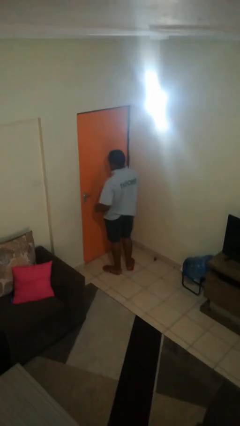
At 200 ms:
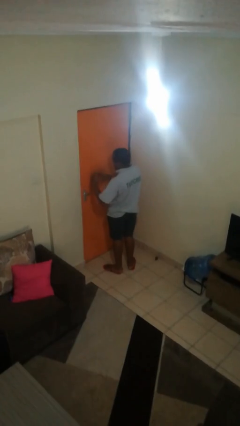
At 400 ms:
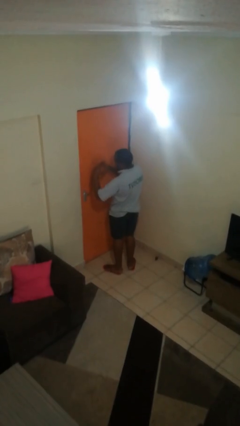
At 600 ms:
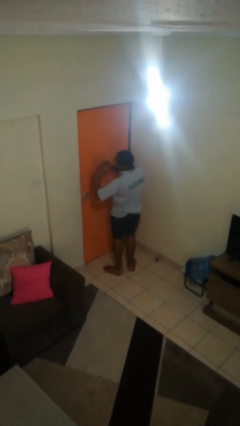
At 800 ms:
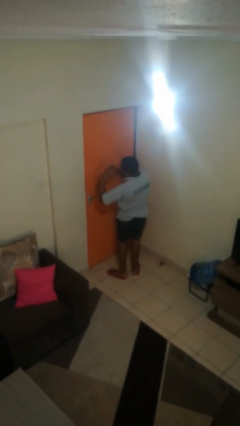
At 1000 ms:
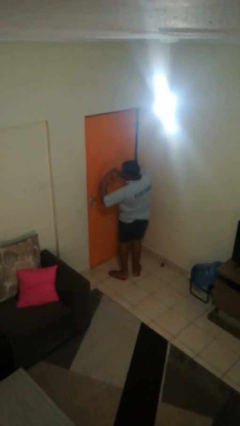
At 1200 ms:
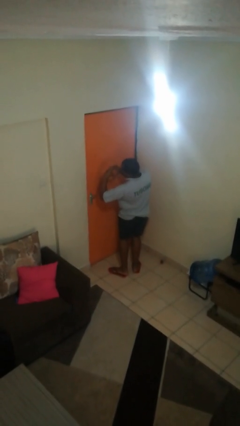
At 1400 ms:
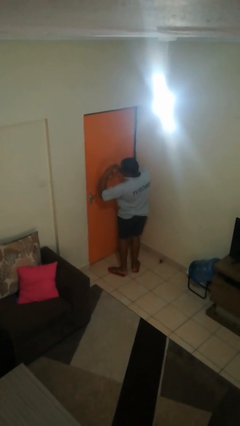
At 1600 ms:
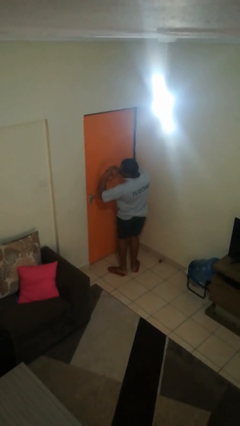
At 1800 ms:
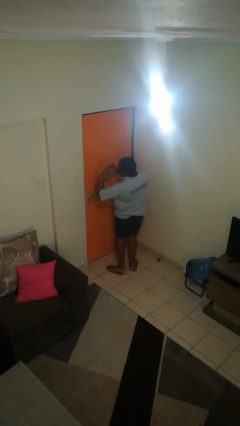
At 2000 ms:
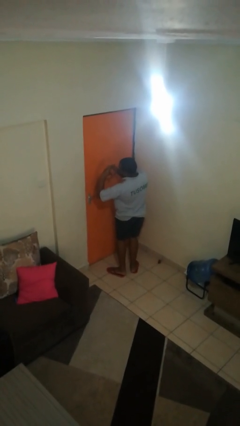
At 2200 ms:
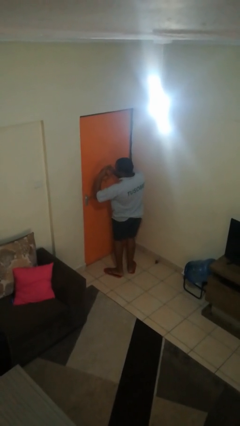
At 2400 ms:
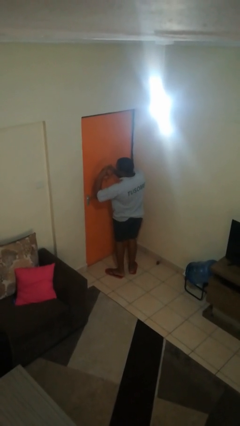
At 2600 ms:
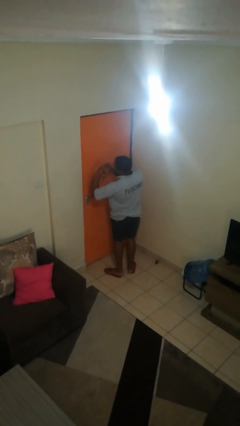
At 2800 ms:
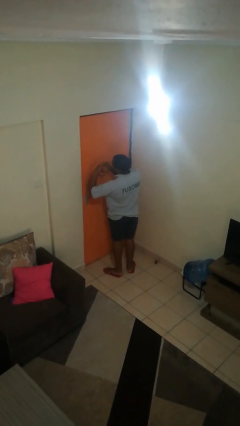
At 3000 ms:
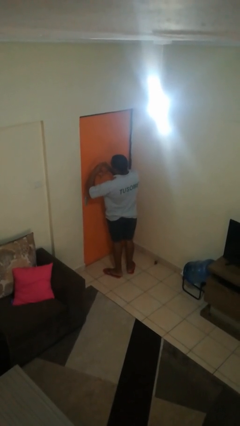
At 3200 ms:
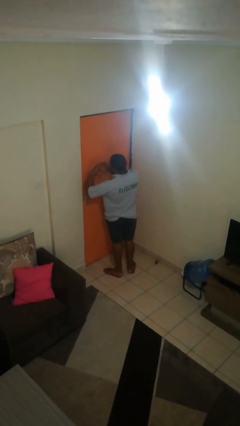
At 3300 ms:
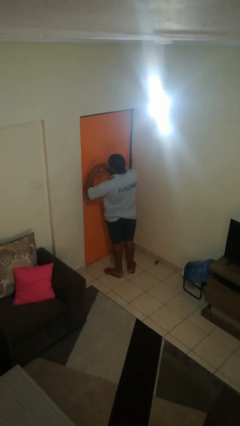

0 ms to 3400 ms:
person gestures heart

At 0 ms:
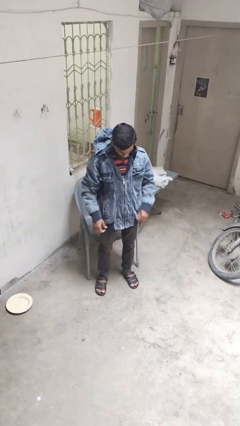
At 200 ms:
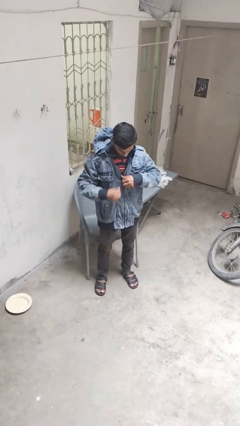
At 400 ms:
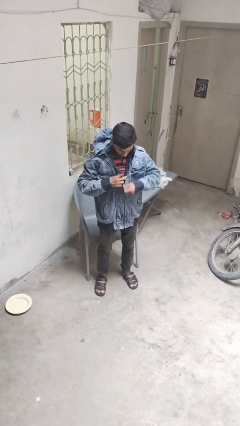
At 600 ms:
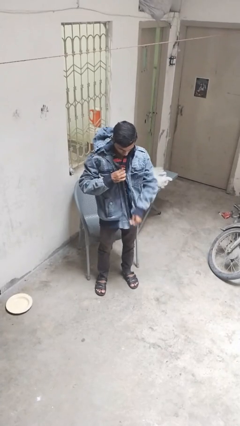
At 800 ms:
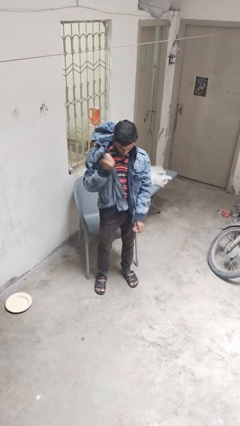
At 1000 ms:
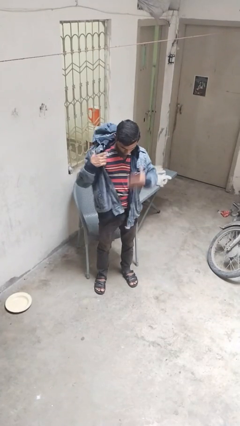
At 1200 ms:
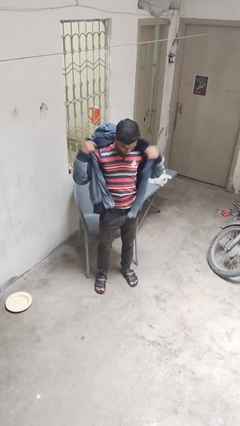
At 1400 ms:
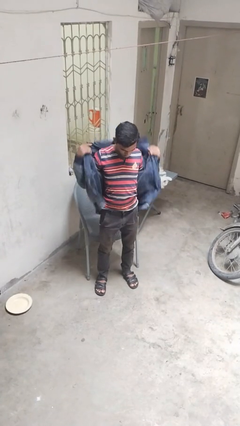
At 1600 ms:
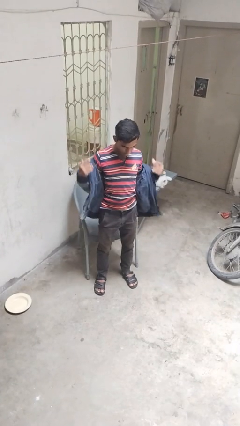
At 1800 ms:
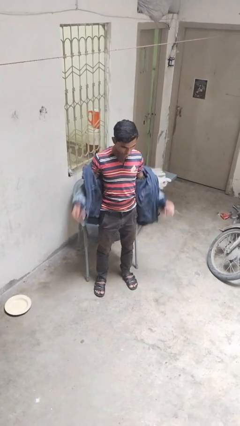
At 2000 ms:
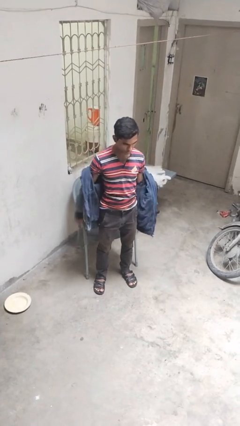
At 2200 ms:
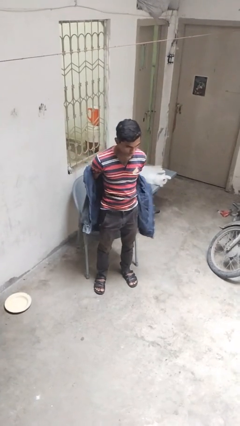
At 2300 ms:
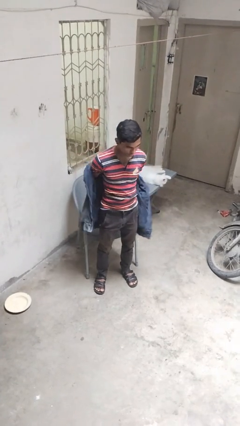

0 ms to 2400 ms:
person unzips jacket

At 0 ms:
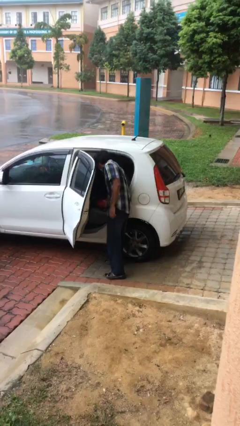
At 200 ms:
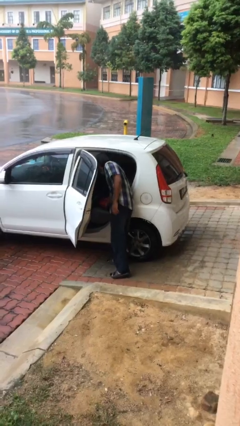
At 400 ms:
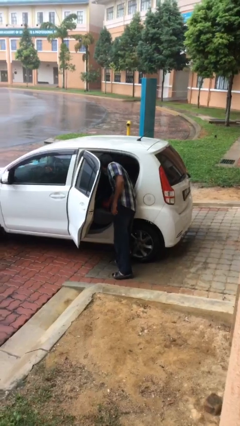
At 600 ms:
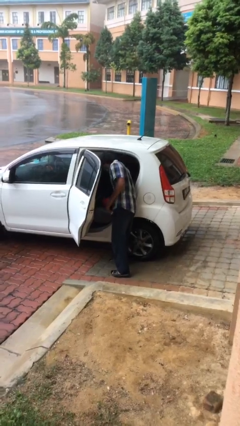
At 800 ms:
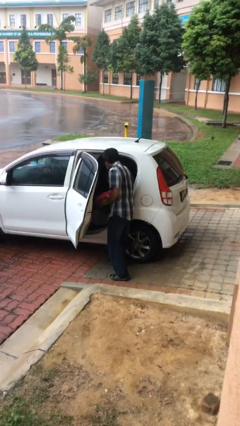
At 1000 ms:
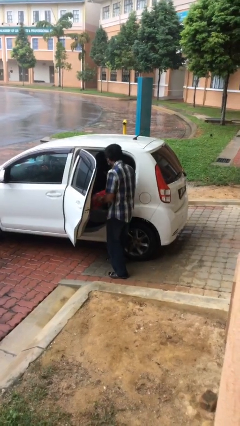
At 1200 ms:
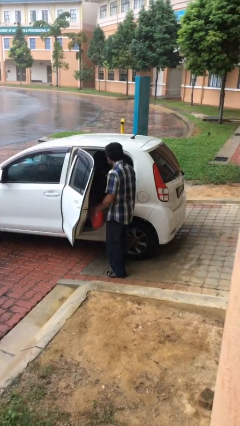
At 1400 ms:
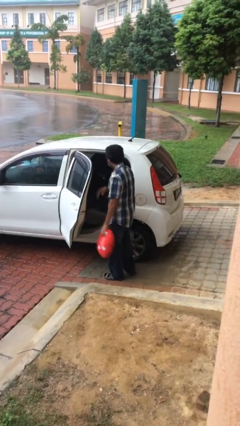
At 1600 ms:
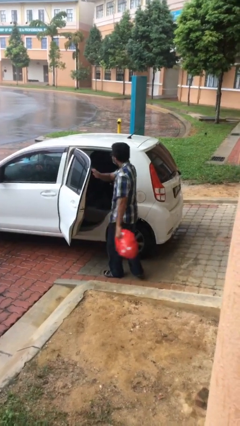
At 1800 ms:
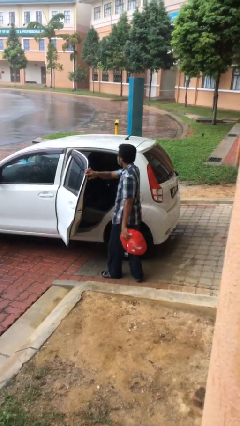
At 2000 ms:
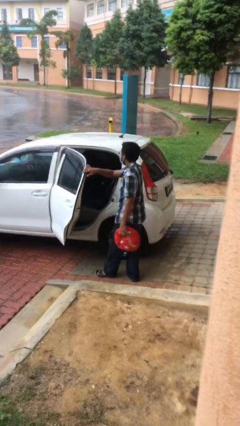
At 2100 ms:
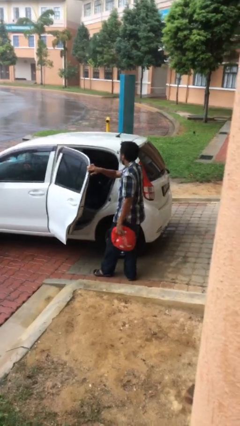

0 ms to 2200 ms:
person unloads car

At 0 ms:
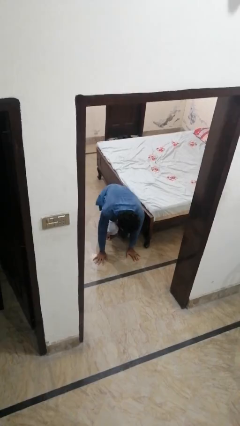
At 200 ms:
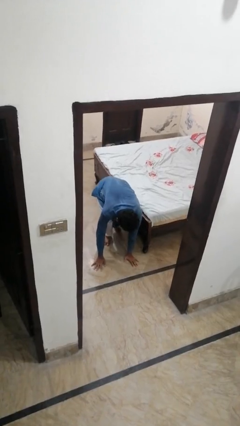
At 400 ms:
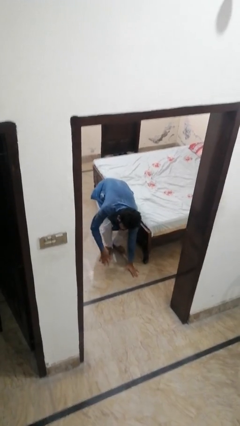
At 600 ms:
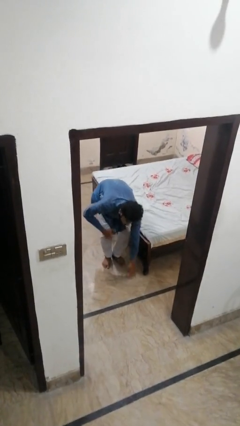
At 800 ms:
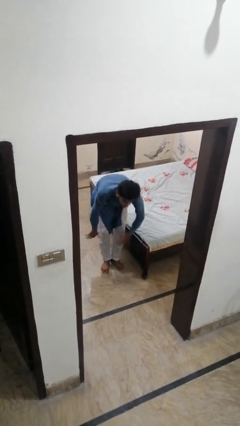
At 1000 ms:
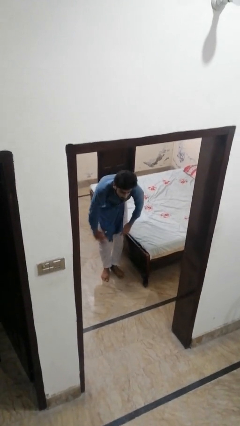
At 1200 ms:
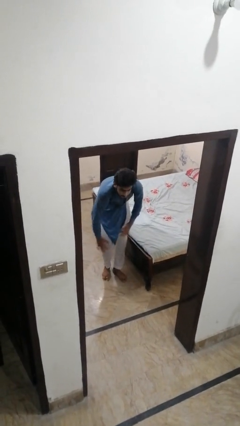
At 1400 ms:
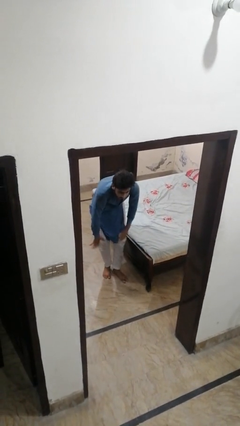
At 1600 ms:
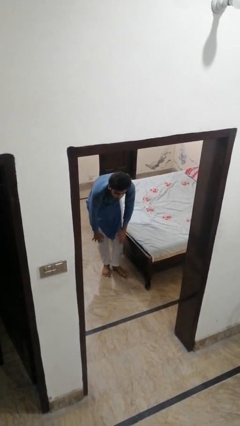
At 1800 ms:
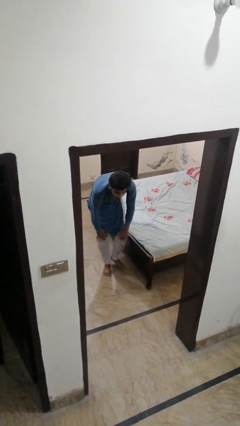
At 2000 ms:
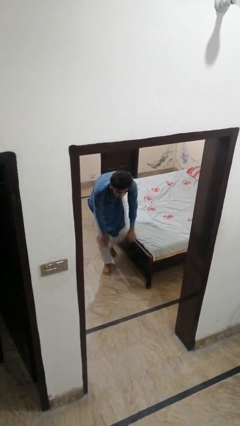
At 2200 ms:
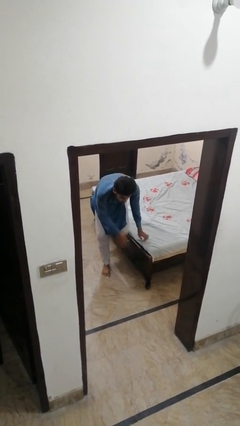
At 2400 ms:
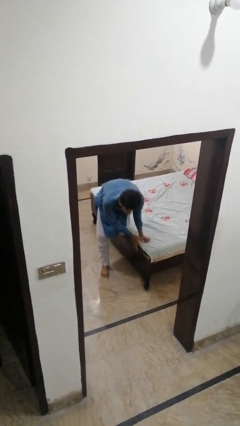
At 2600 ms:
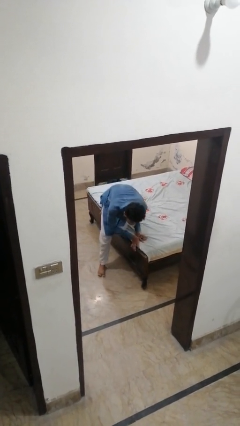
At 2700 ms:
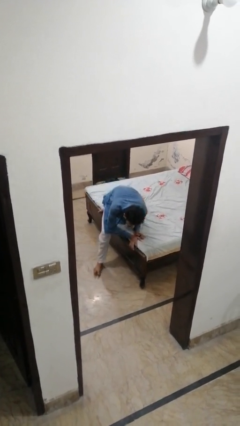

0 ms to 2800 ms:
person stands up from floor

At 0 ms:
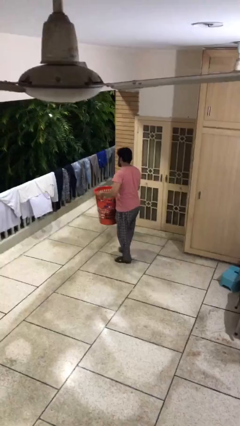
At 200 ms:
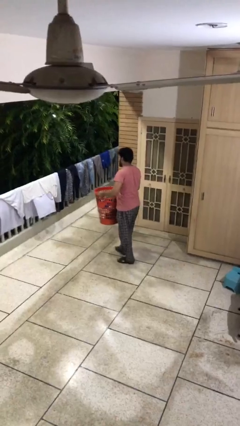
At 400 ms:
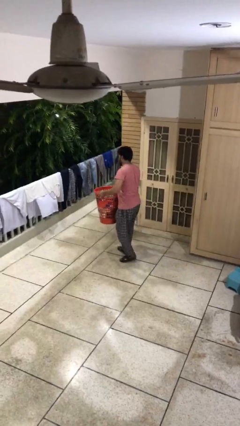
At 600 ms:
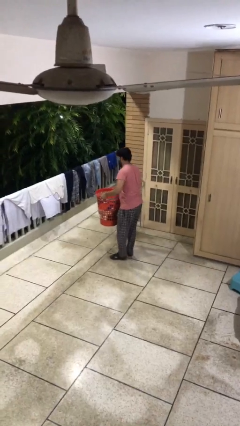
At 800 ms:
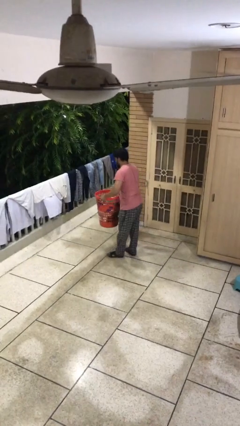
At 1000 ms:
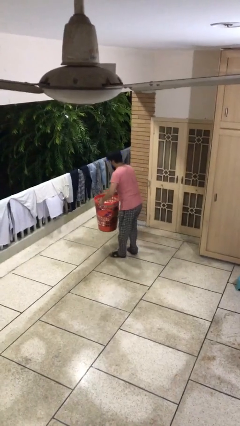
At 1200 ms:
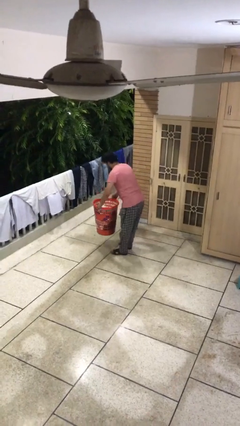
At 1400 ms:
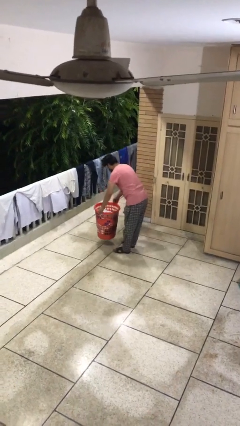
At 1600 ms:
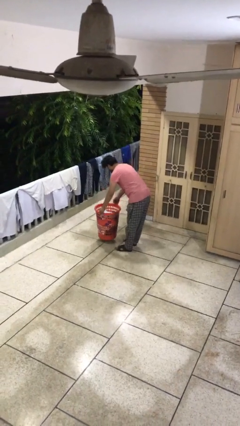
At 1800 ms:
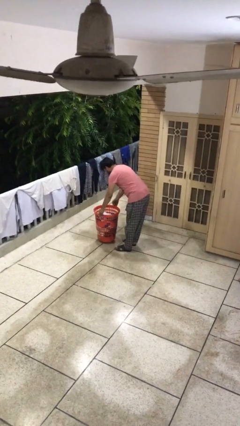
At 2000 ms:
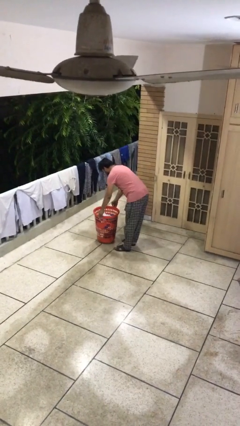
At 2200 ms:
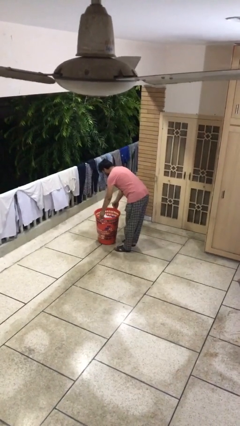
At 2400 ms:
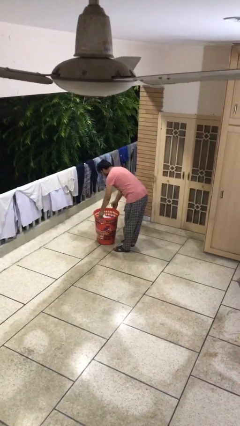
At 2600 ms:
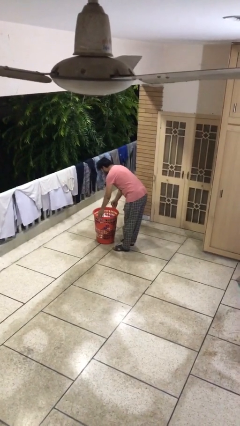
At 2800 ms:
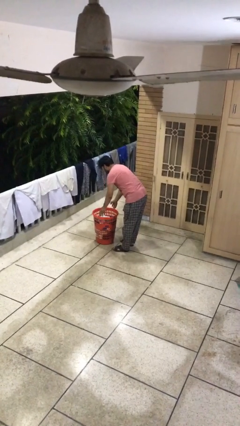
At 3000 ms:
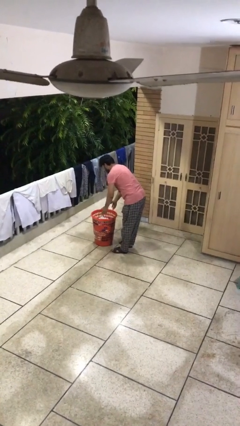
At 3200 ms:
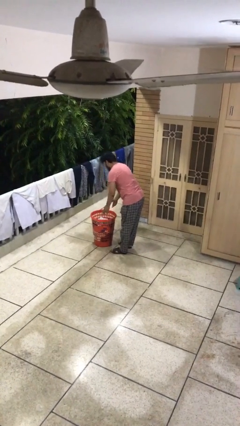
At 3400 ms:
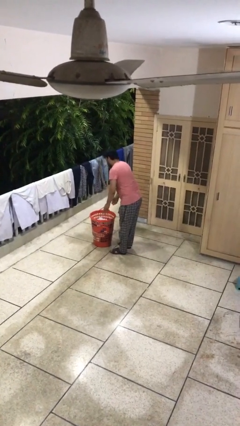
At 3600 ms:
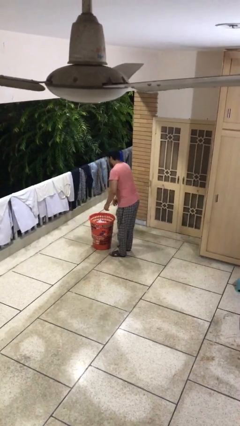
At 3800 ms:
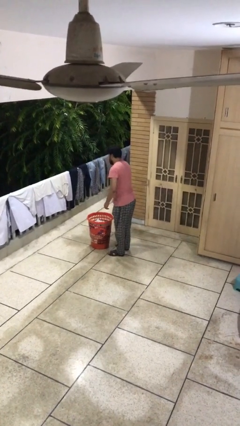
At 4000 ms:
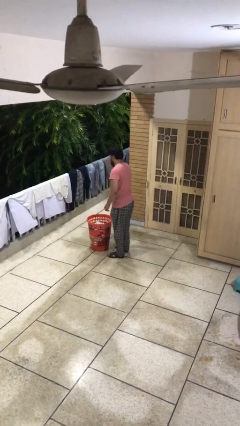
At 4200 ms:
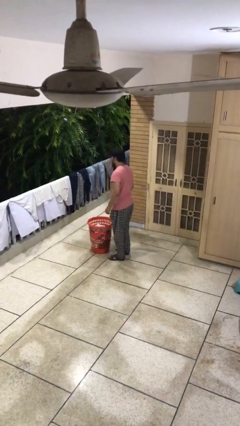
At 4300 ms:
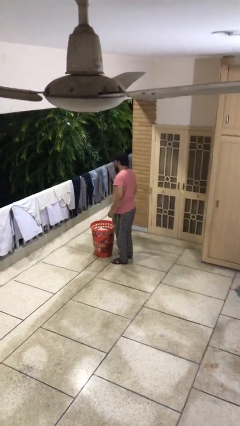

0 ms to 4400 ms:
person puts down object on floor

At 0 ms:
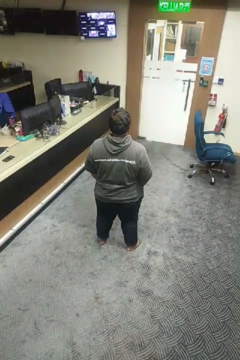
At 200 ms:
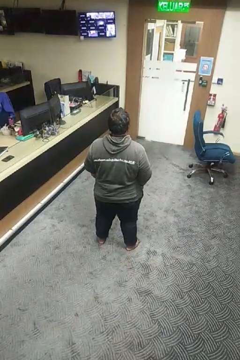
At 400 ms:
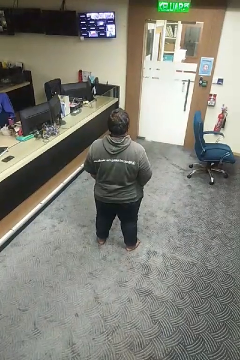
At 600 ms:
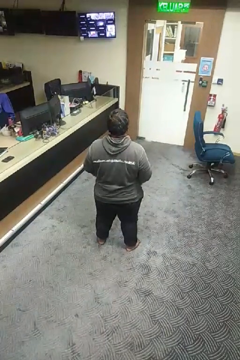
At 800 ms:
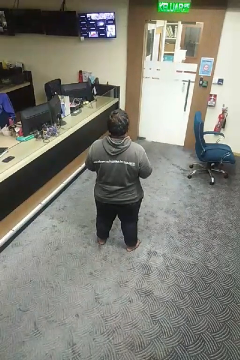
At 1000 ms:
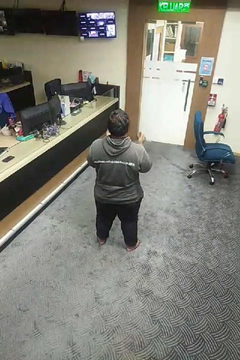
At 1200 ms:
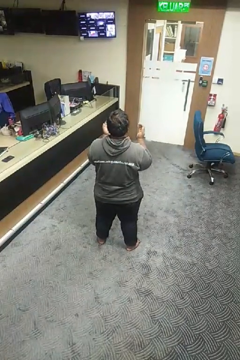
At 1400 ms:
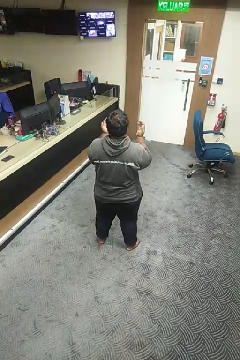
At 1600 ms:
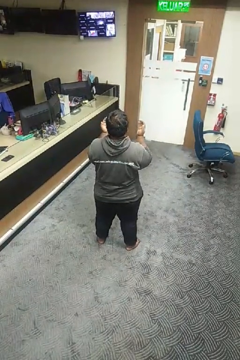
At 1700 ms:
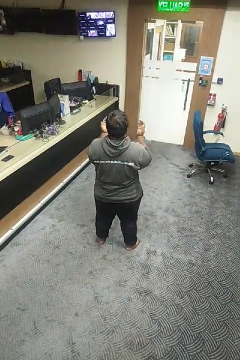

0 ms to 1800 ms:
person prays

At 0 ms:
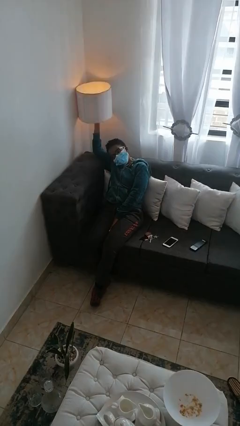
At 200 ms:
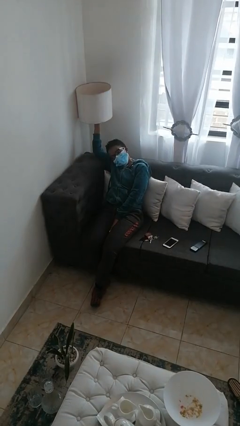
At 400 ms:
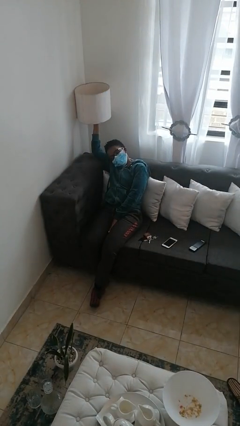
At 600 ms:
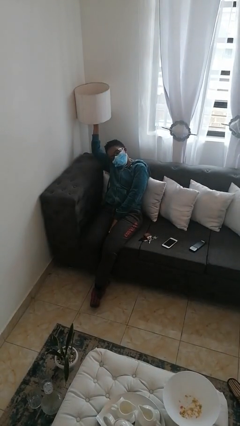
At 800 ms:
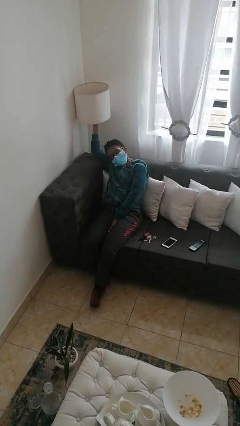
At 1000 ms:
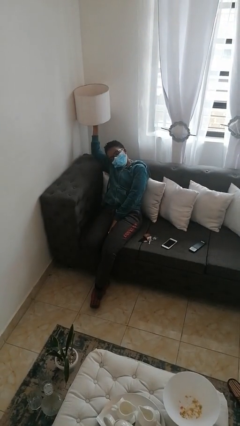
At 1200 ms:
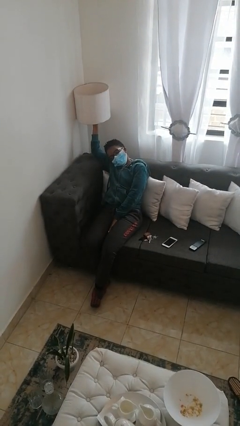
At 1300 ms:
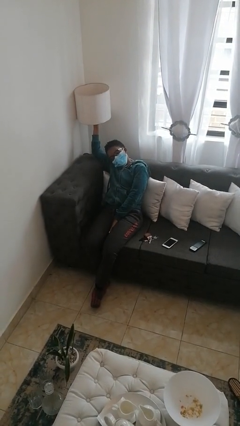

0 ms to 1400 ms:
person turns off lamp
